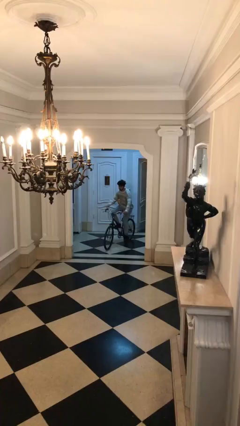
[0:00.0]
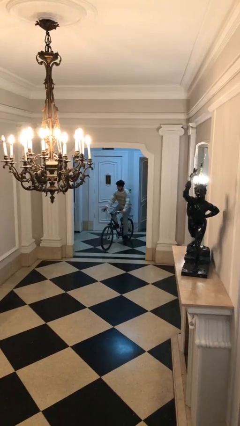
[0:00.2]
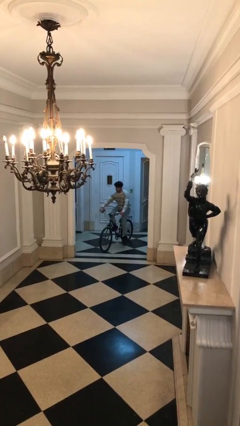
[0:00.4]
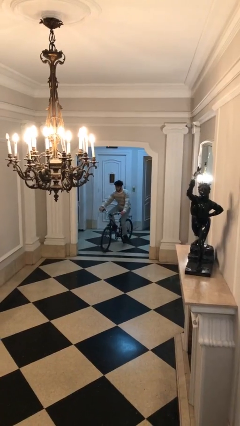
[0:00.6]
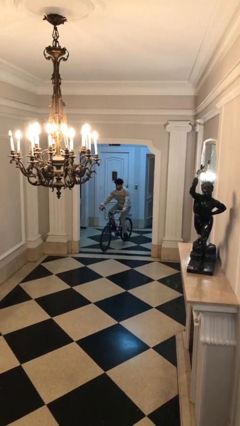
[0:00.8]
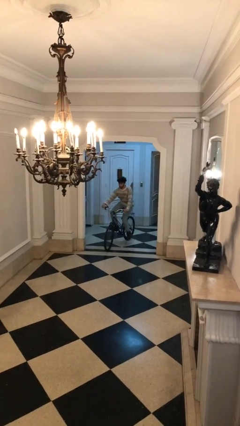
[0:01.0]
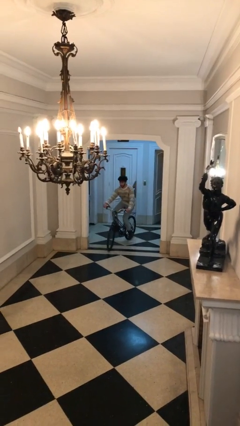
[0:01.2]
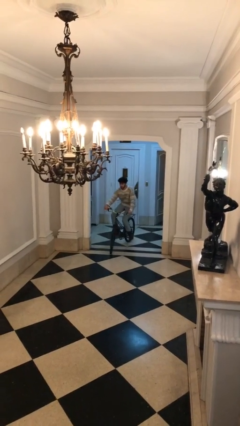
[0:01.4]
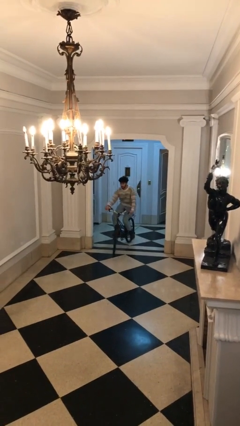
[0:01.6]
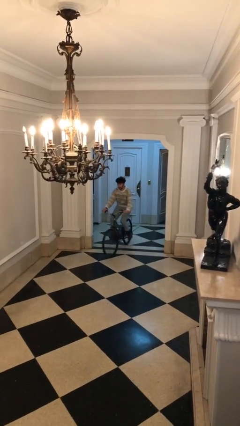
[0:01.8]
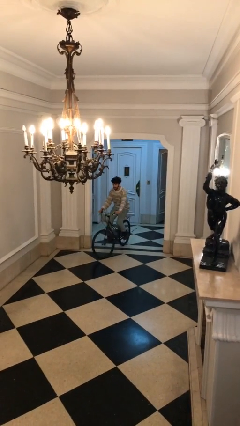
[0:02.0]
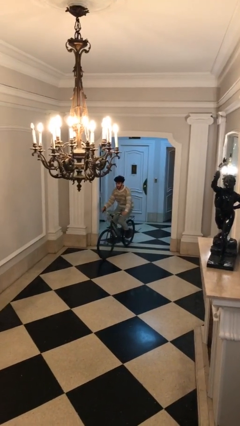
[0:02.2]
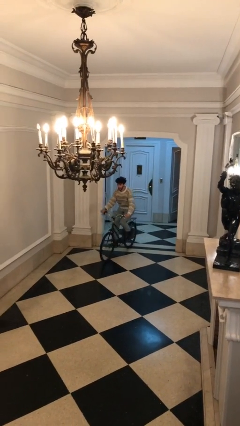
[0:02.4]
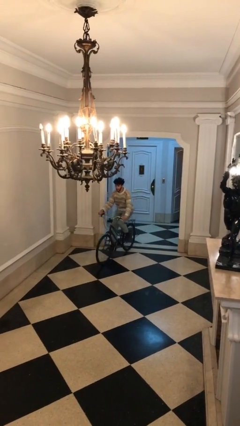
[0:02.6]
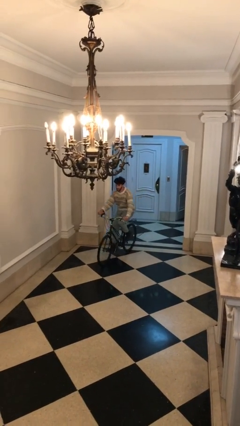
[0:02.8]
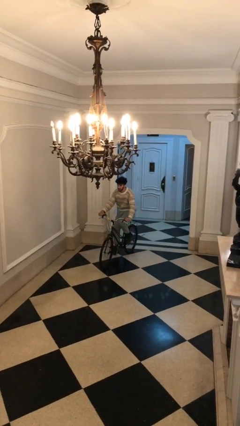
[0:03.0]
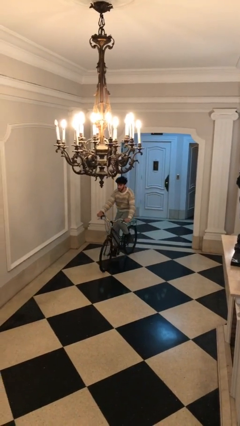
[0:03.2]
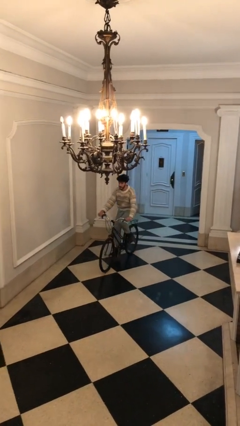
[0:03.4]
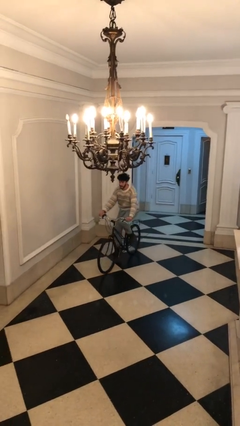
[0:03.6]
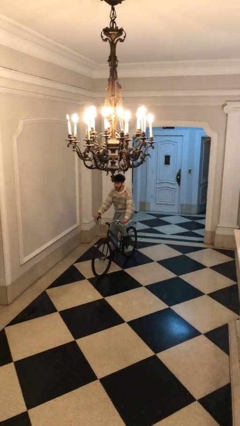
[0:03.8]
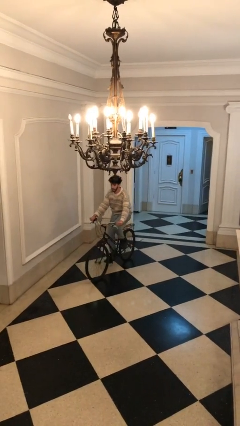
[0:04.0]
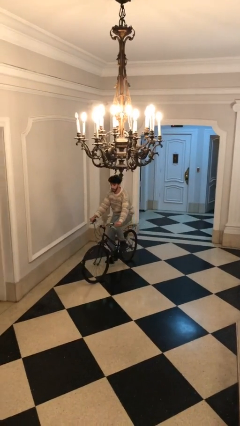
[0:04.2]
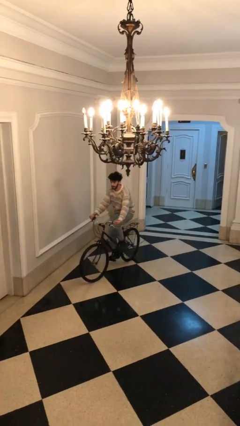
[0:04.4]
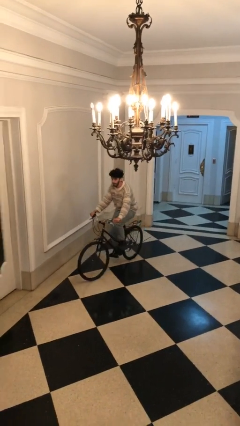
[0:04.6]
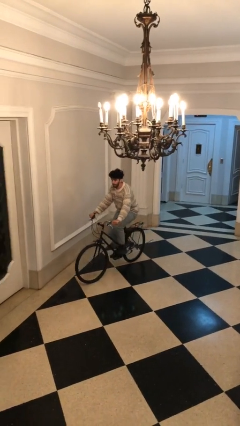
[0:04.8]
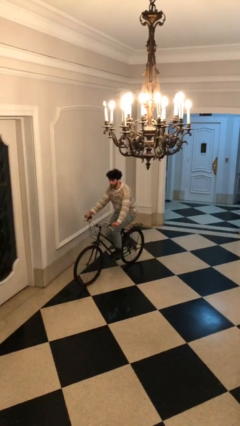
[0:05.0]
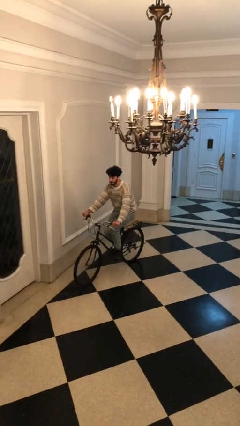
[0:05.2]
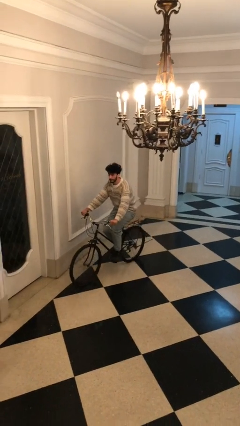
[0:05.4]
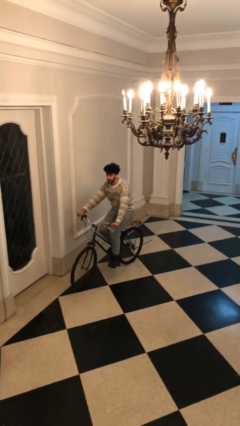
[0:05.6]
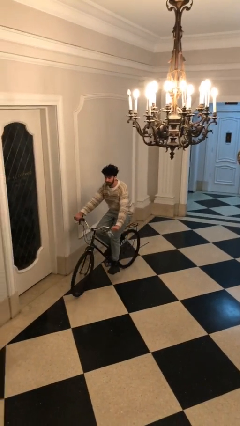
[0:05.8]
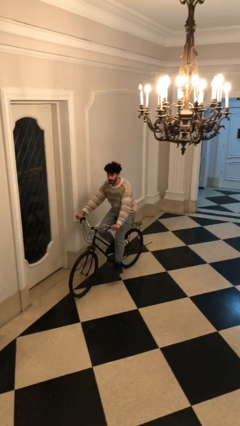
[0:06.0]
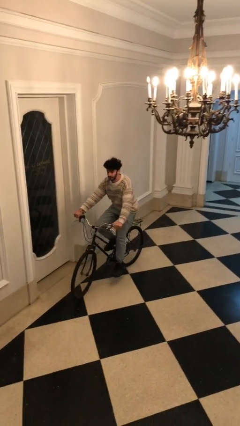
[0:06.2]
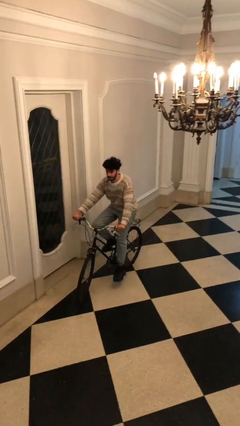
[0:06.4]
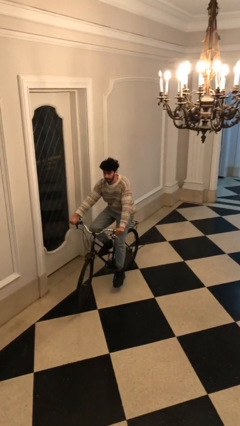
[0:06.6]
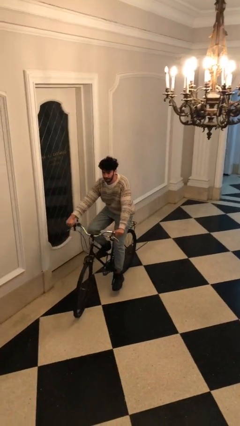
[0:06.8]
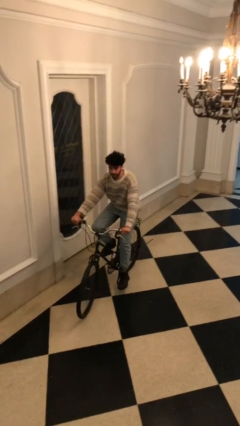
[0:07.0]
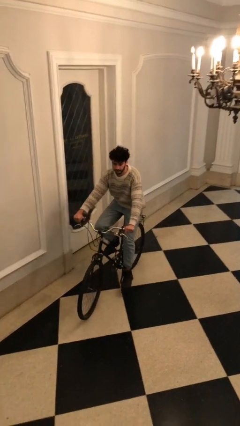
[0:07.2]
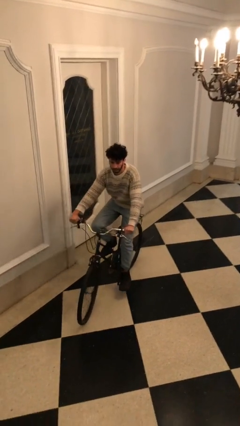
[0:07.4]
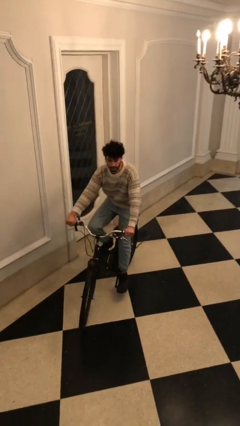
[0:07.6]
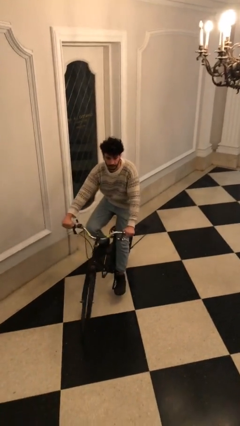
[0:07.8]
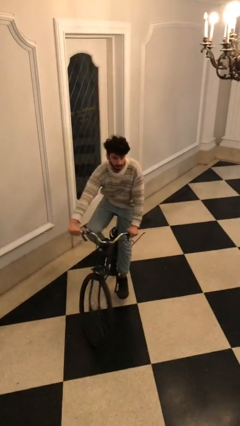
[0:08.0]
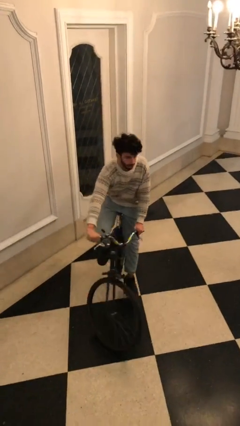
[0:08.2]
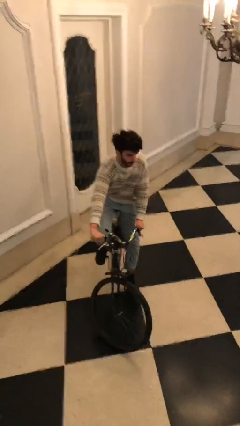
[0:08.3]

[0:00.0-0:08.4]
person rides bicycle

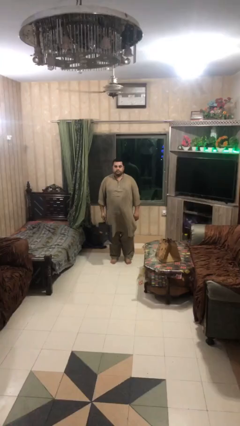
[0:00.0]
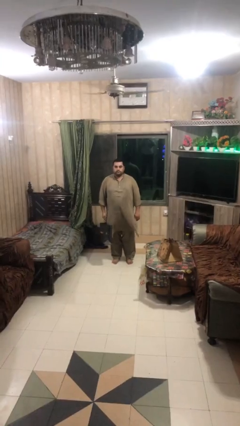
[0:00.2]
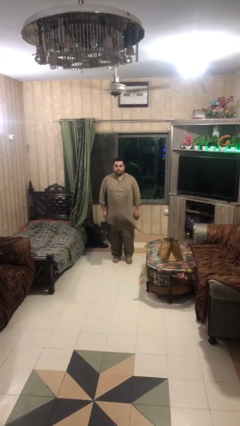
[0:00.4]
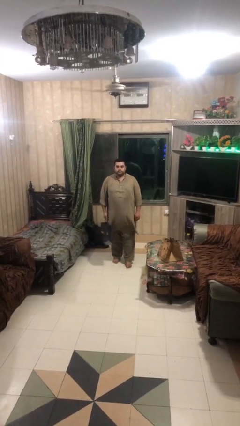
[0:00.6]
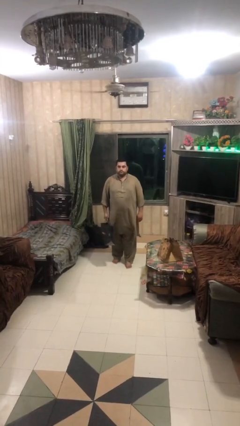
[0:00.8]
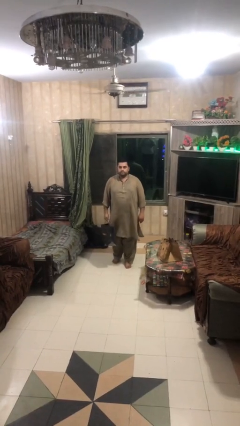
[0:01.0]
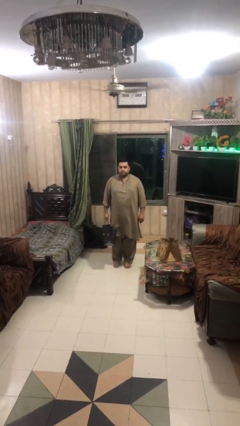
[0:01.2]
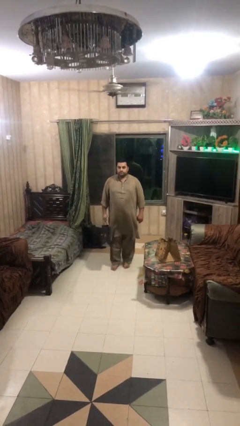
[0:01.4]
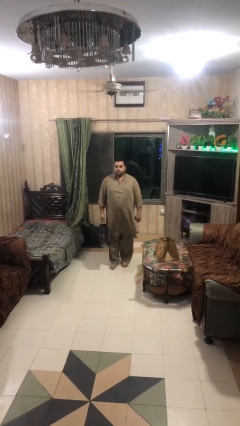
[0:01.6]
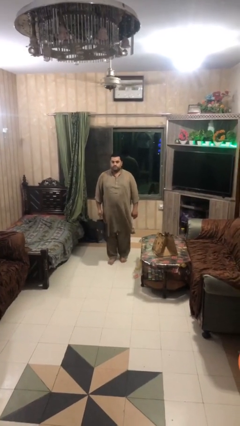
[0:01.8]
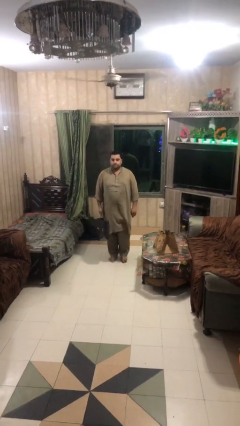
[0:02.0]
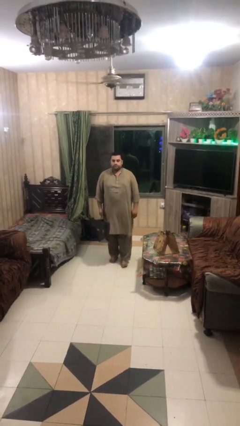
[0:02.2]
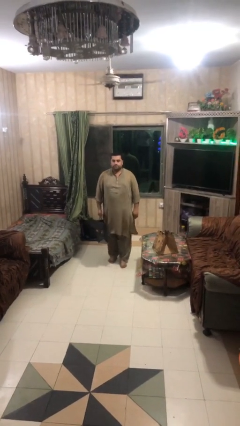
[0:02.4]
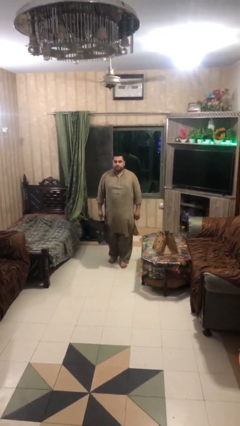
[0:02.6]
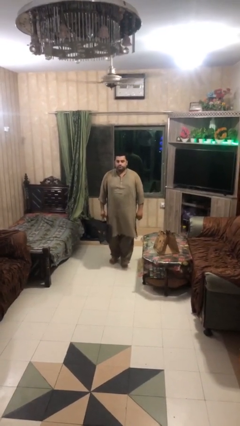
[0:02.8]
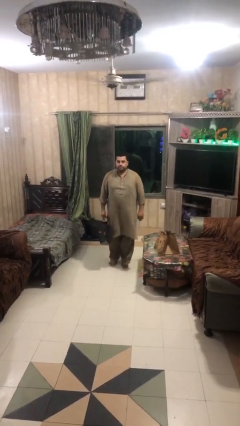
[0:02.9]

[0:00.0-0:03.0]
person carries groceries

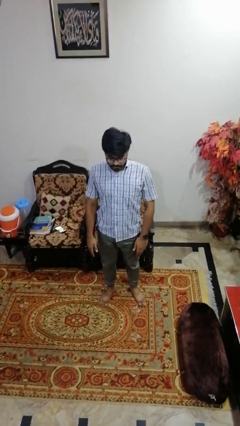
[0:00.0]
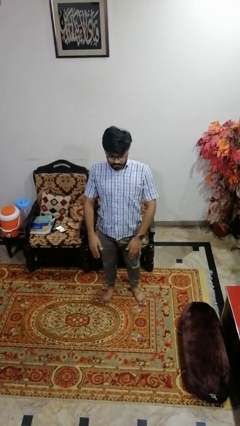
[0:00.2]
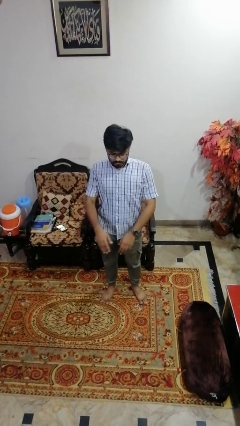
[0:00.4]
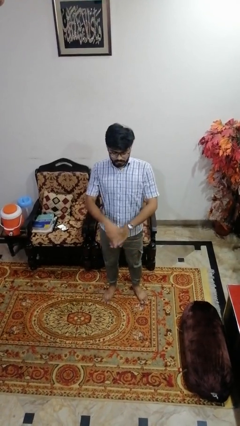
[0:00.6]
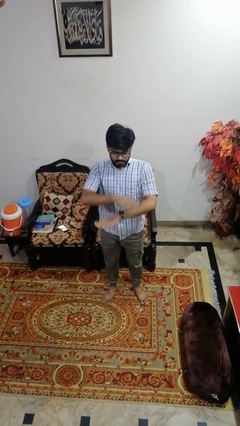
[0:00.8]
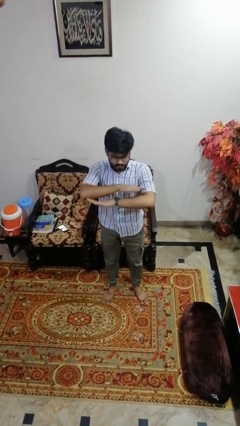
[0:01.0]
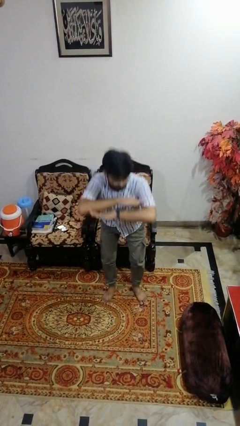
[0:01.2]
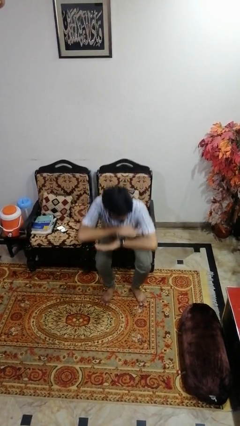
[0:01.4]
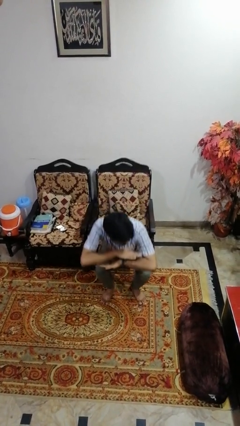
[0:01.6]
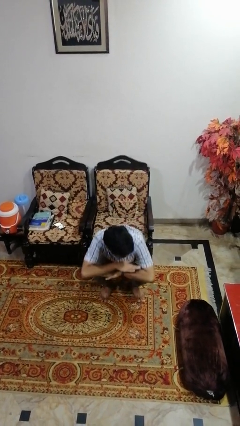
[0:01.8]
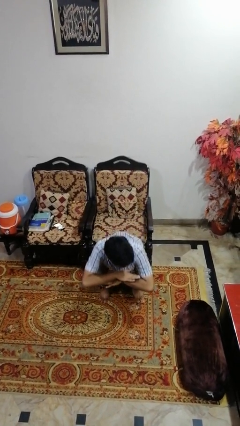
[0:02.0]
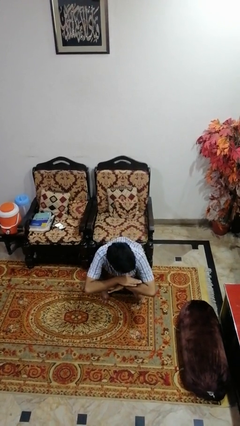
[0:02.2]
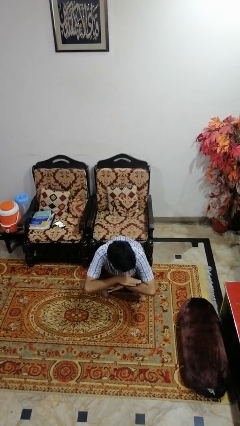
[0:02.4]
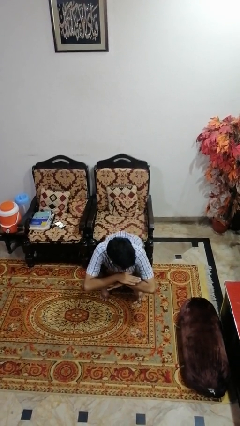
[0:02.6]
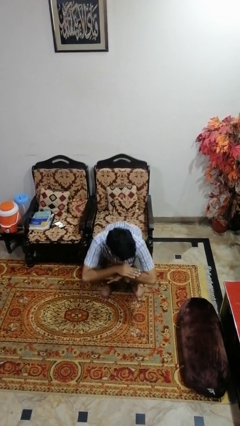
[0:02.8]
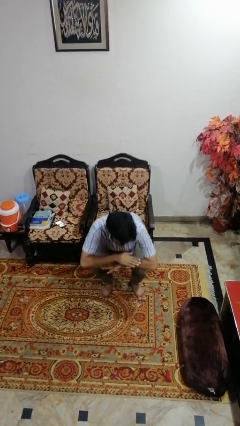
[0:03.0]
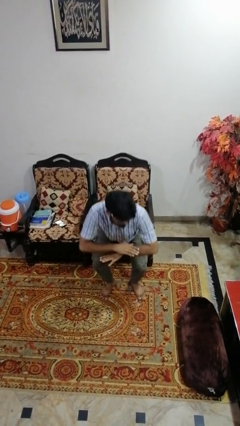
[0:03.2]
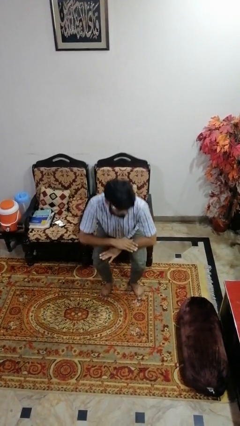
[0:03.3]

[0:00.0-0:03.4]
person squats

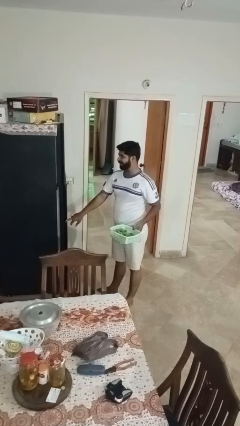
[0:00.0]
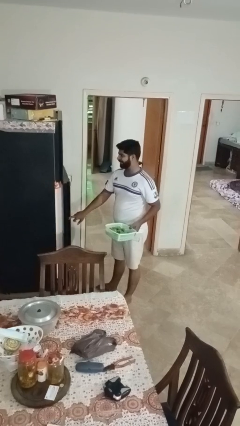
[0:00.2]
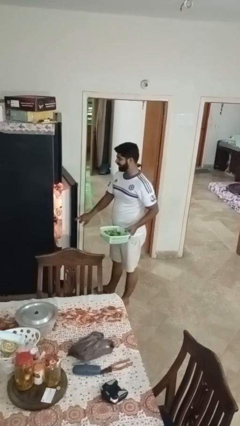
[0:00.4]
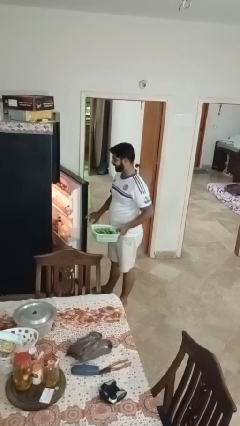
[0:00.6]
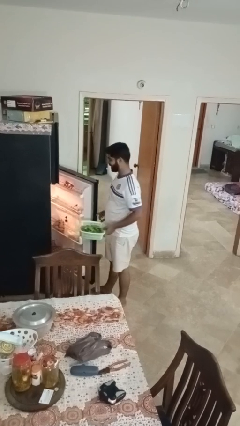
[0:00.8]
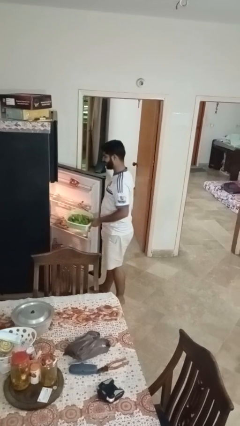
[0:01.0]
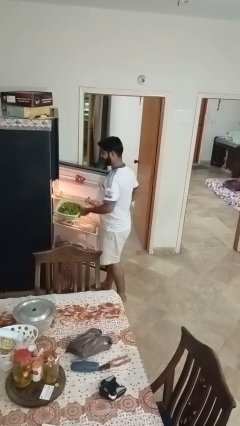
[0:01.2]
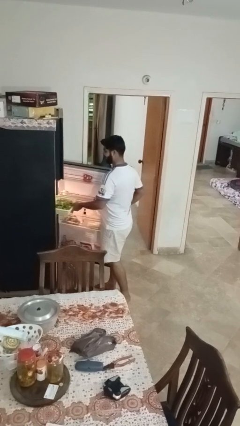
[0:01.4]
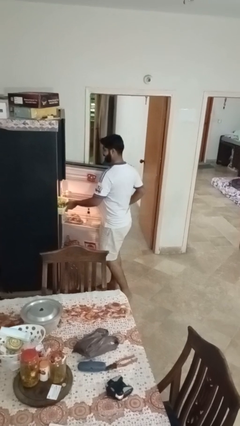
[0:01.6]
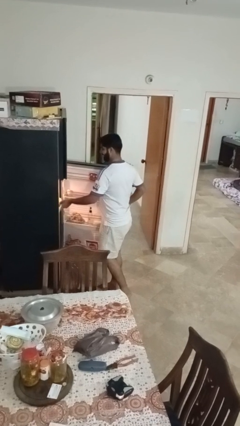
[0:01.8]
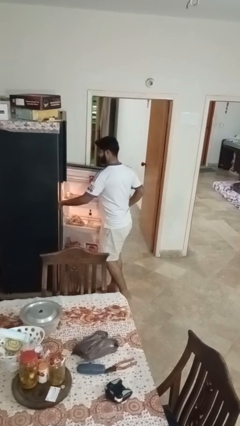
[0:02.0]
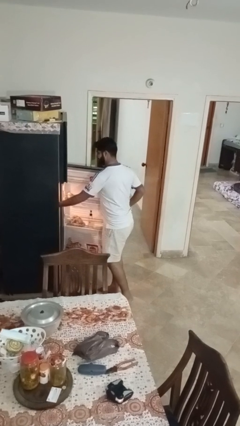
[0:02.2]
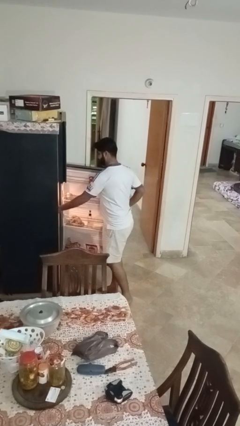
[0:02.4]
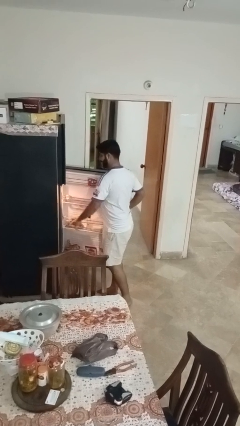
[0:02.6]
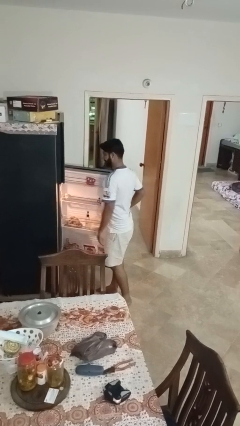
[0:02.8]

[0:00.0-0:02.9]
person puts object into refrigerator

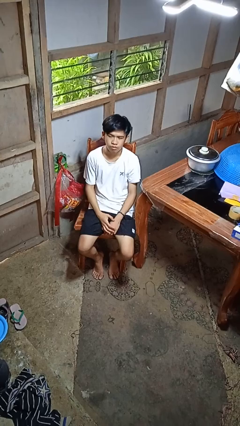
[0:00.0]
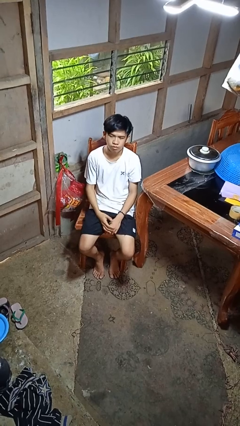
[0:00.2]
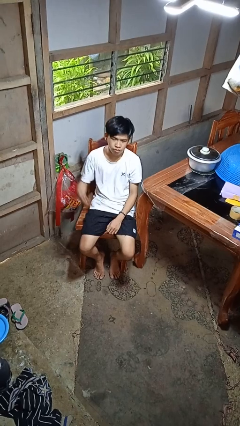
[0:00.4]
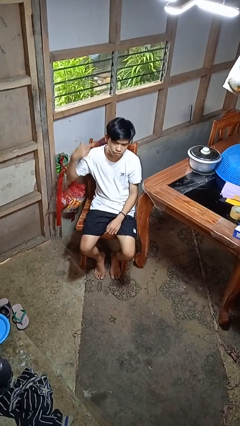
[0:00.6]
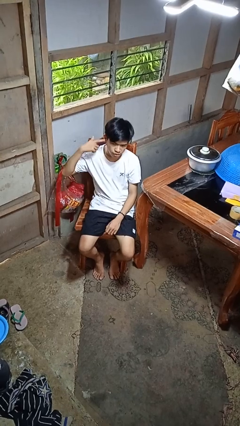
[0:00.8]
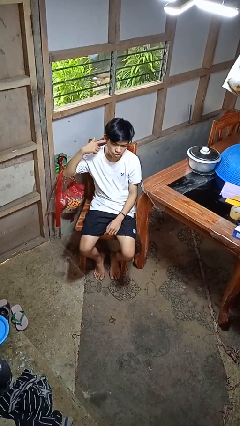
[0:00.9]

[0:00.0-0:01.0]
person gestures listen closely
